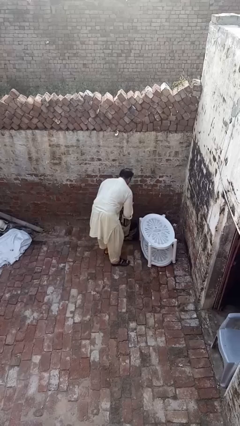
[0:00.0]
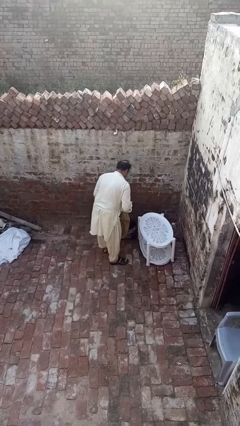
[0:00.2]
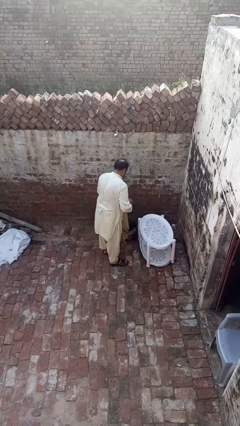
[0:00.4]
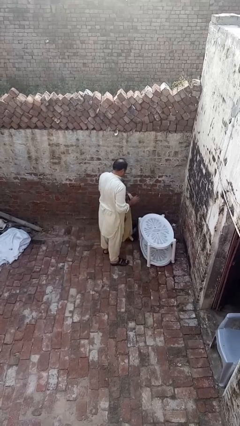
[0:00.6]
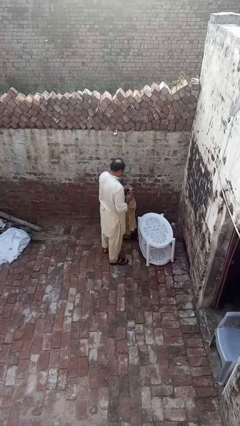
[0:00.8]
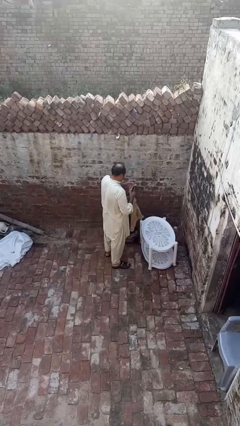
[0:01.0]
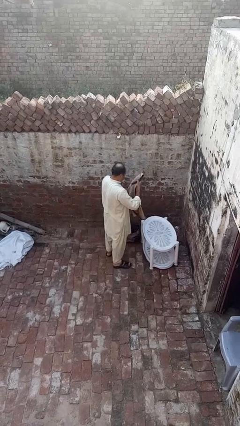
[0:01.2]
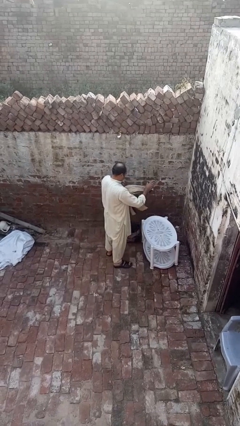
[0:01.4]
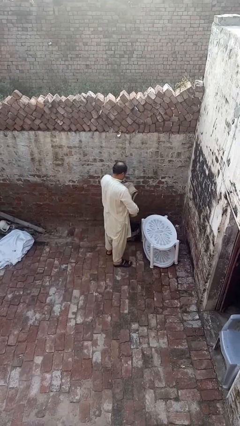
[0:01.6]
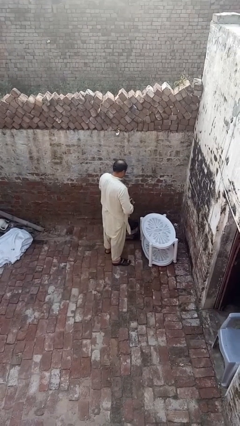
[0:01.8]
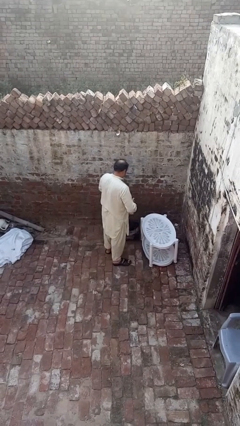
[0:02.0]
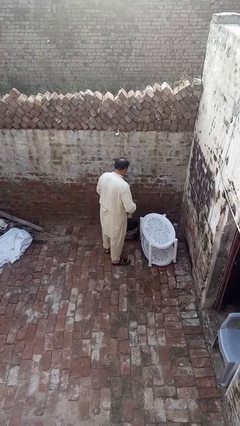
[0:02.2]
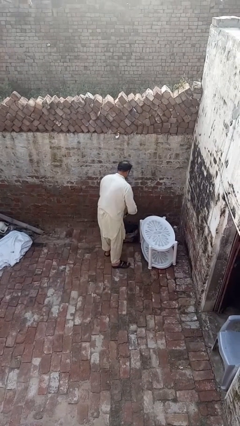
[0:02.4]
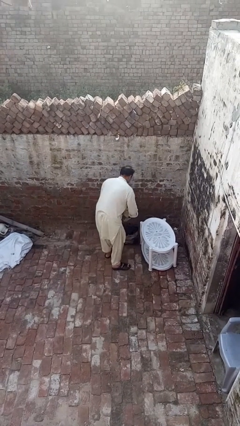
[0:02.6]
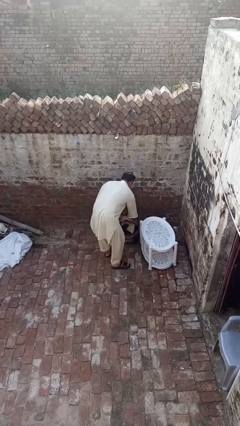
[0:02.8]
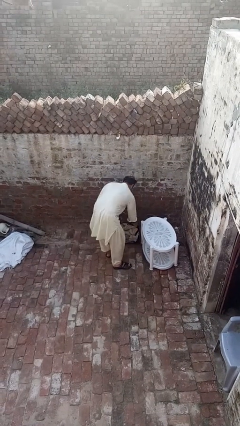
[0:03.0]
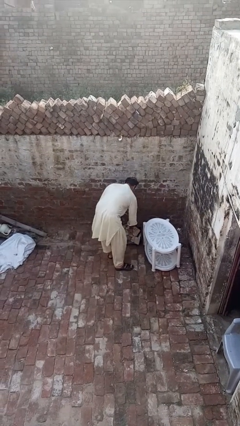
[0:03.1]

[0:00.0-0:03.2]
person folds shirt

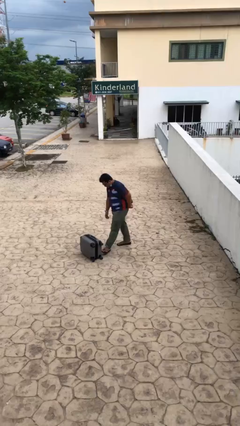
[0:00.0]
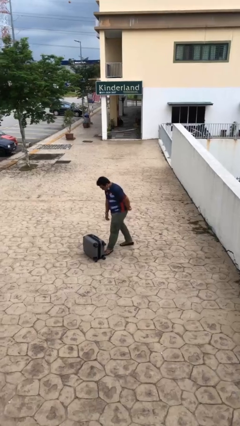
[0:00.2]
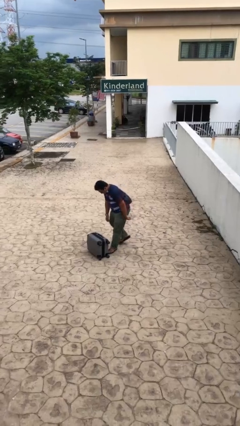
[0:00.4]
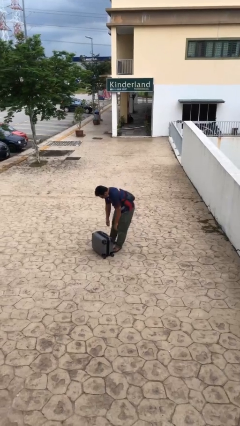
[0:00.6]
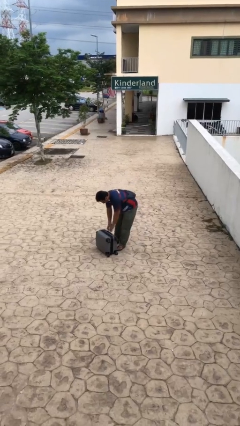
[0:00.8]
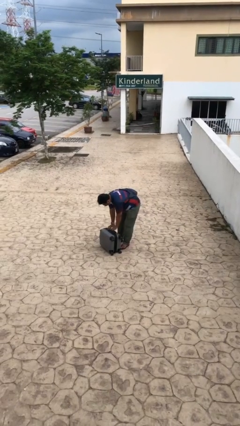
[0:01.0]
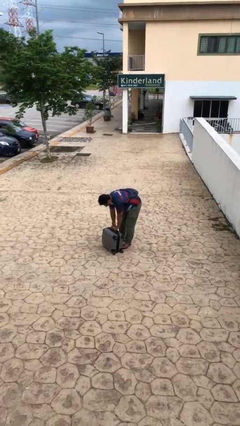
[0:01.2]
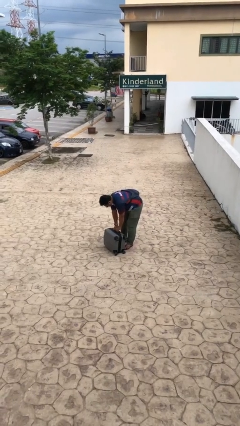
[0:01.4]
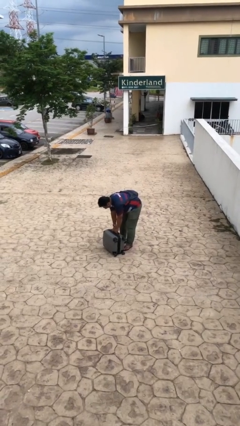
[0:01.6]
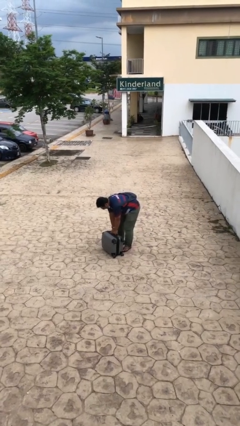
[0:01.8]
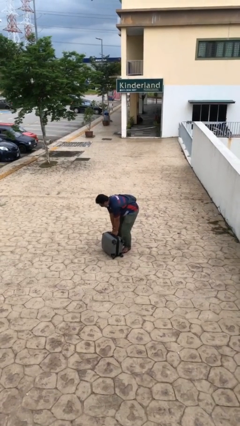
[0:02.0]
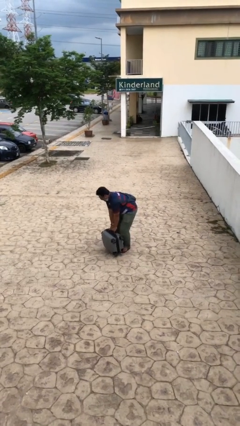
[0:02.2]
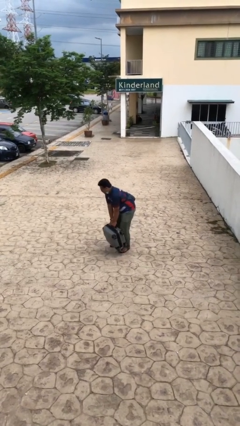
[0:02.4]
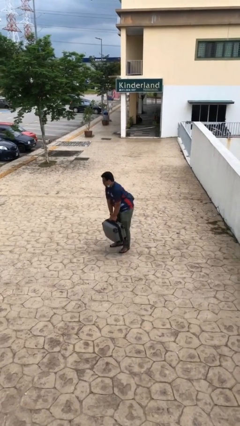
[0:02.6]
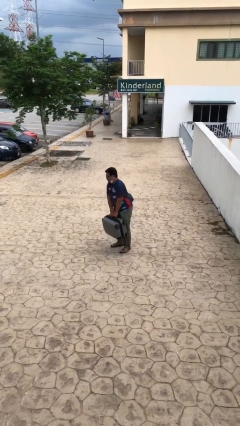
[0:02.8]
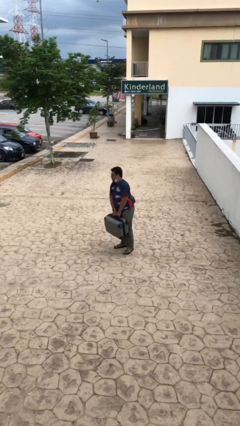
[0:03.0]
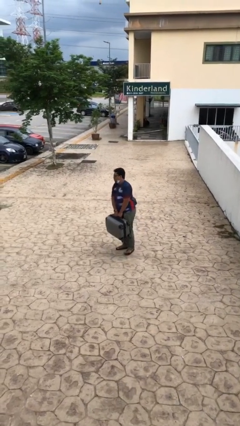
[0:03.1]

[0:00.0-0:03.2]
person picks up object from floor

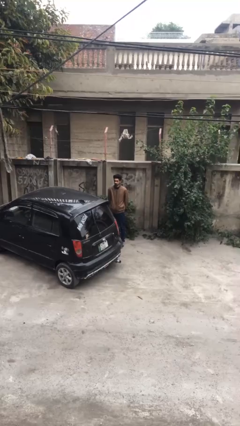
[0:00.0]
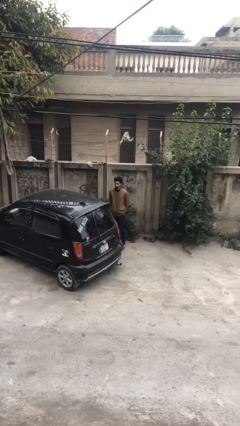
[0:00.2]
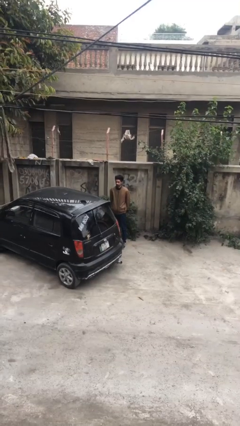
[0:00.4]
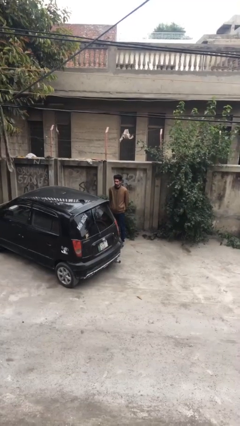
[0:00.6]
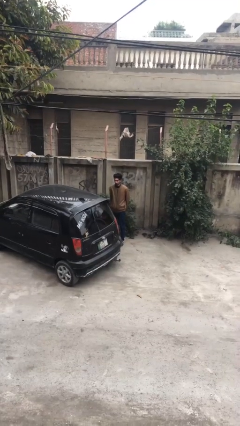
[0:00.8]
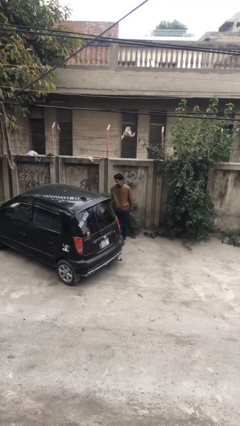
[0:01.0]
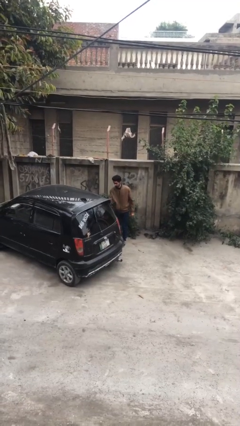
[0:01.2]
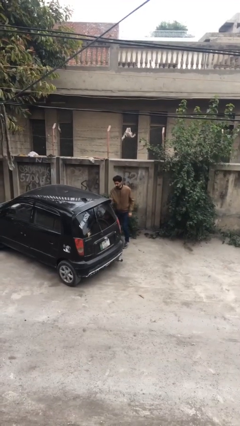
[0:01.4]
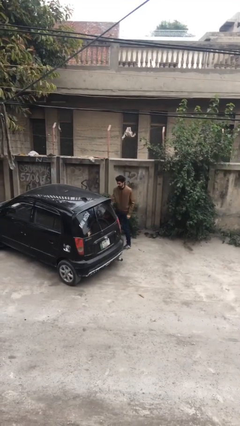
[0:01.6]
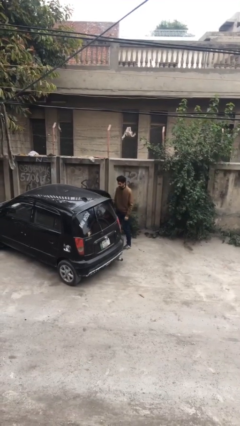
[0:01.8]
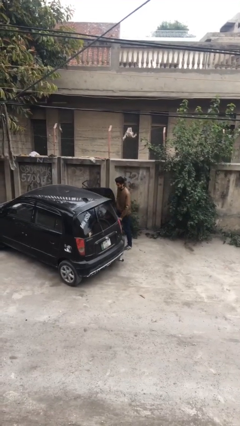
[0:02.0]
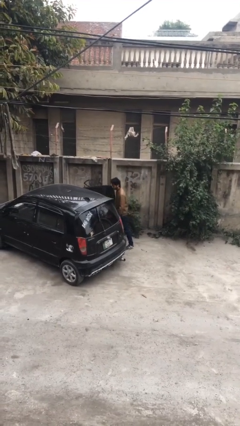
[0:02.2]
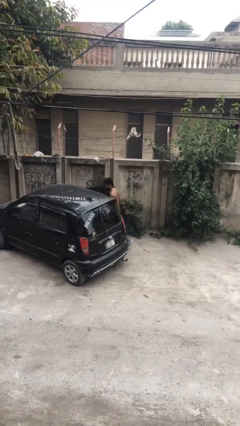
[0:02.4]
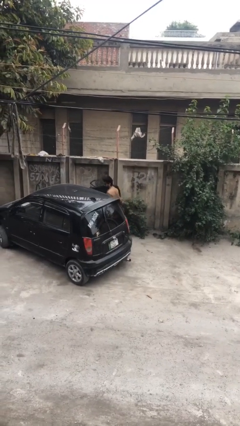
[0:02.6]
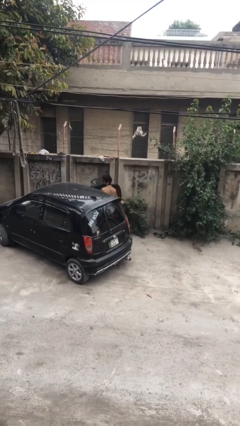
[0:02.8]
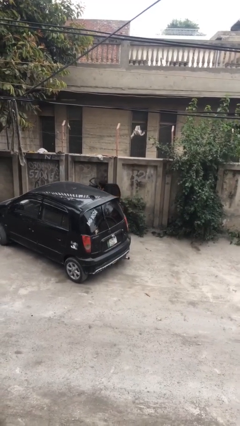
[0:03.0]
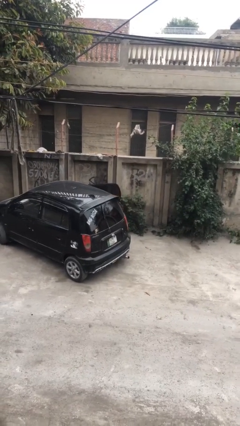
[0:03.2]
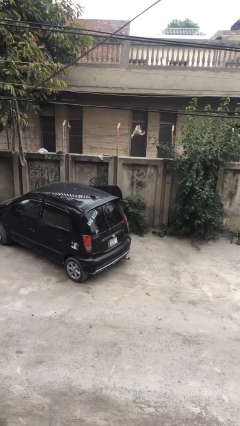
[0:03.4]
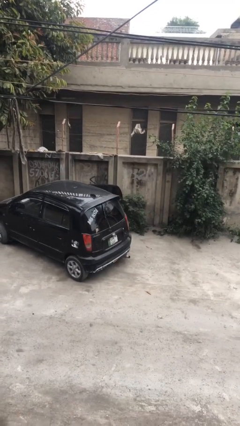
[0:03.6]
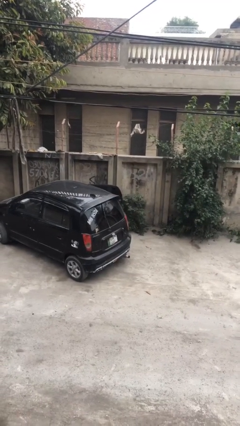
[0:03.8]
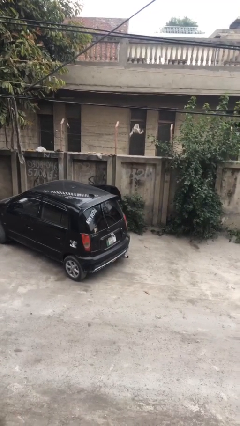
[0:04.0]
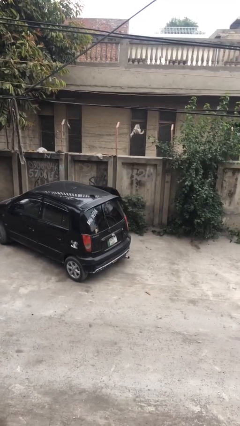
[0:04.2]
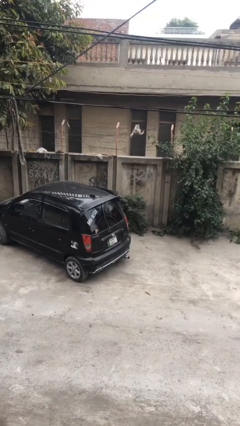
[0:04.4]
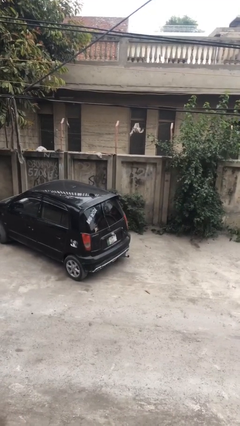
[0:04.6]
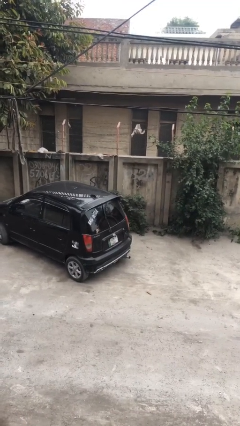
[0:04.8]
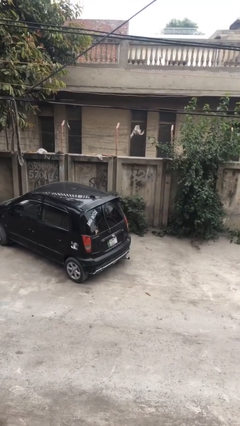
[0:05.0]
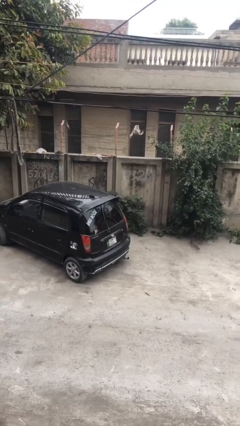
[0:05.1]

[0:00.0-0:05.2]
person enters car

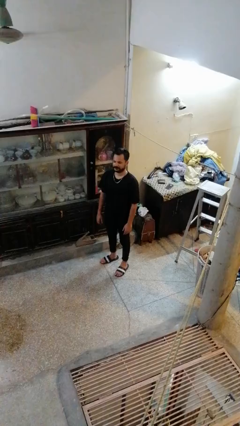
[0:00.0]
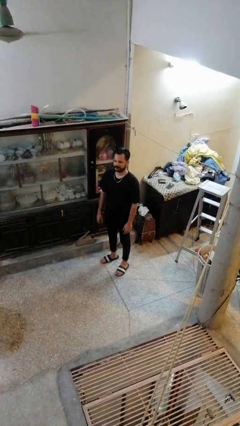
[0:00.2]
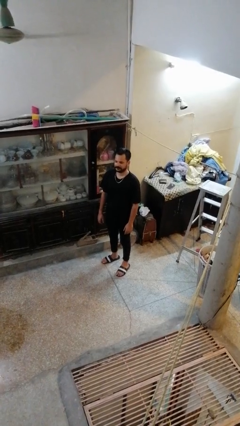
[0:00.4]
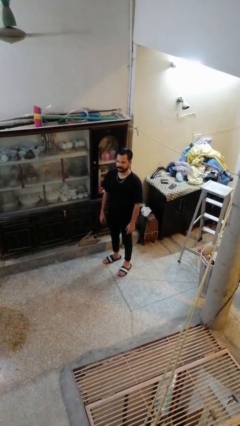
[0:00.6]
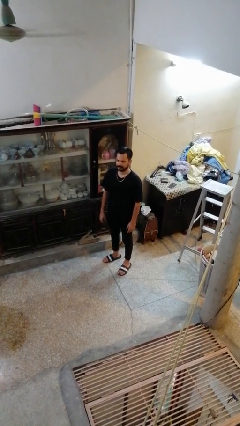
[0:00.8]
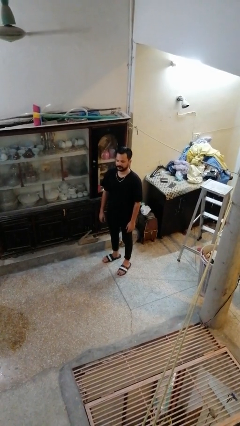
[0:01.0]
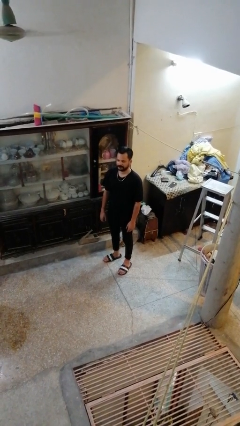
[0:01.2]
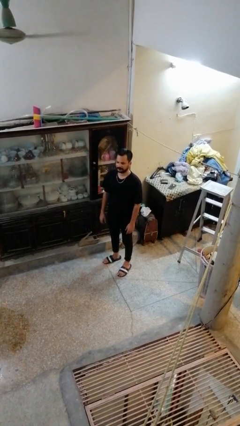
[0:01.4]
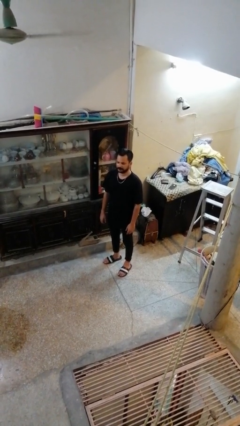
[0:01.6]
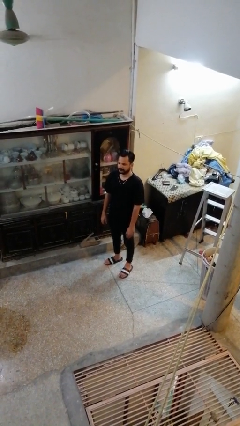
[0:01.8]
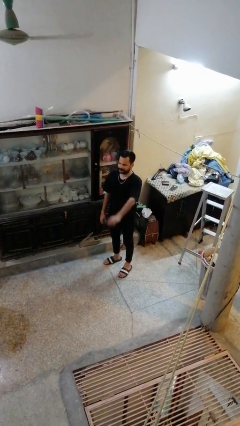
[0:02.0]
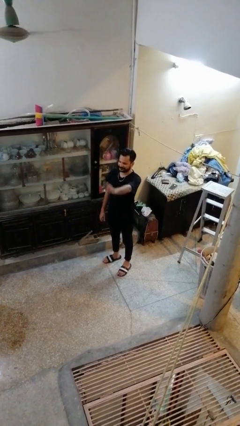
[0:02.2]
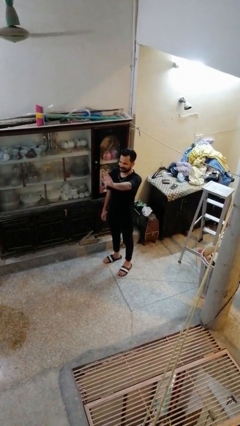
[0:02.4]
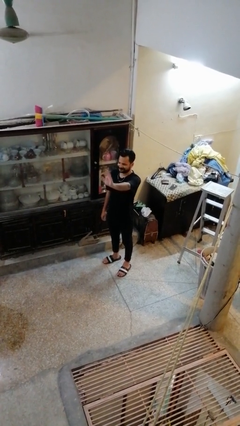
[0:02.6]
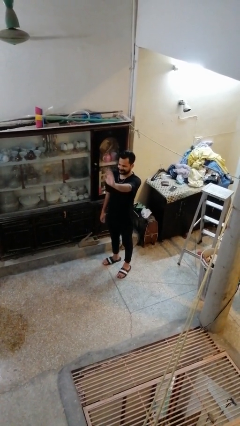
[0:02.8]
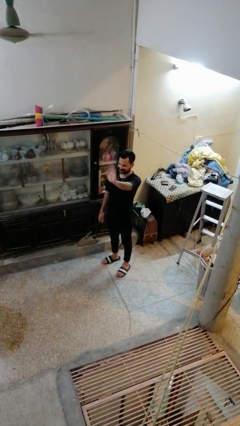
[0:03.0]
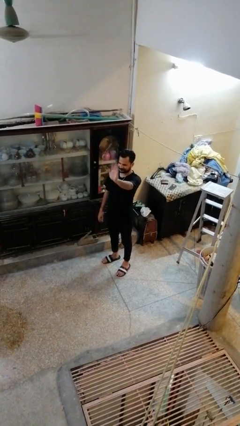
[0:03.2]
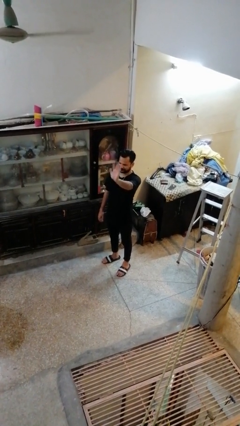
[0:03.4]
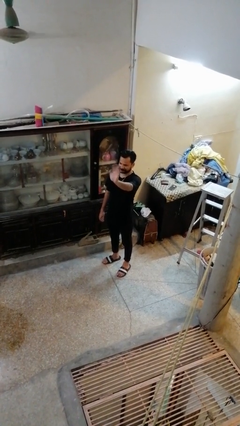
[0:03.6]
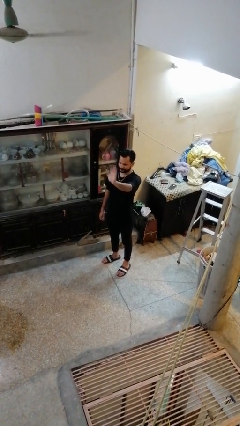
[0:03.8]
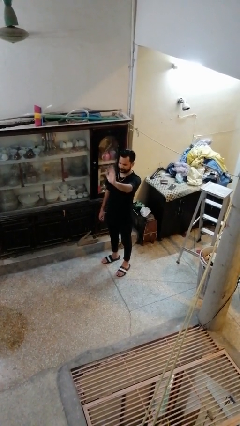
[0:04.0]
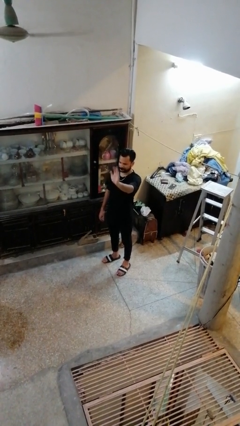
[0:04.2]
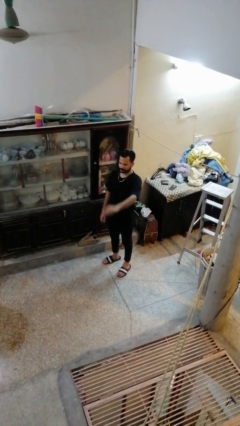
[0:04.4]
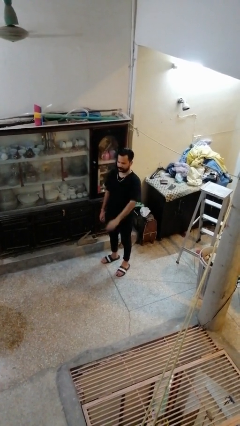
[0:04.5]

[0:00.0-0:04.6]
person waves at person

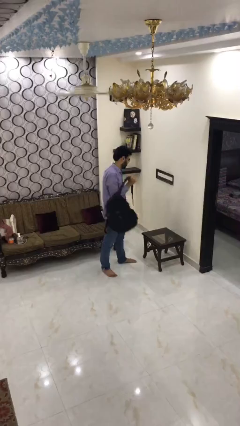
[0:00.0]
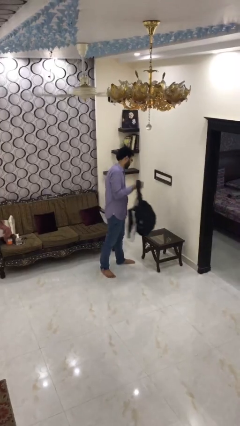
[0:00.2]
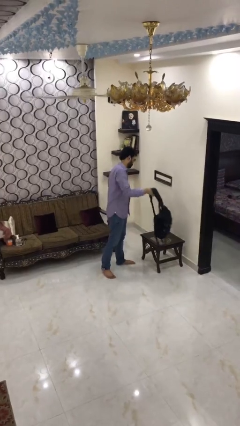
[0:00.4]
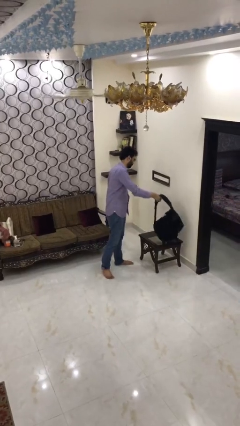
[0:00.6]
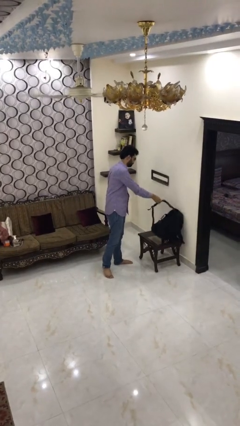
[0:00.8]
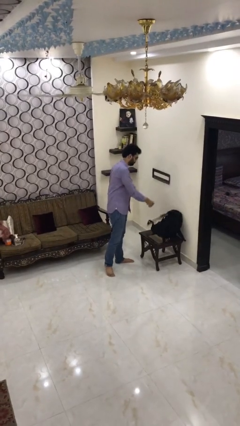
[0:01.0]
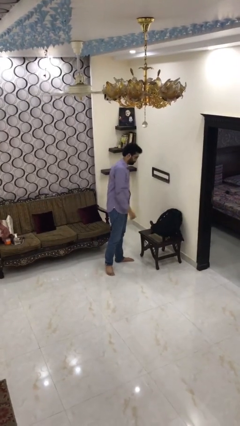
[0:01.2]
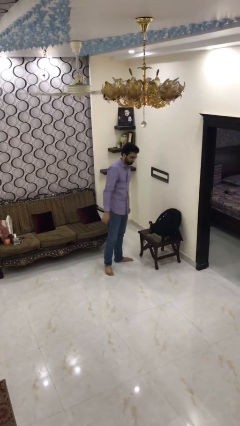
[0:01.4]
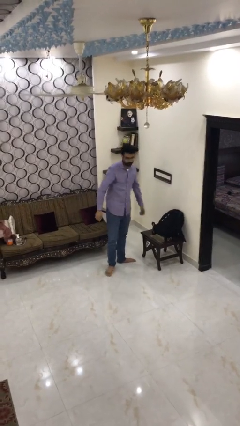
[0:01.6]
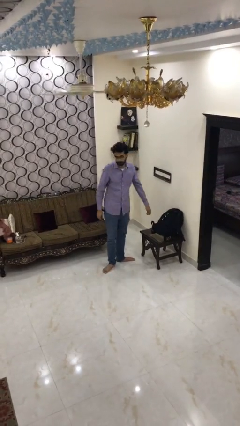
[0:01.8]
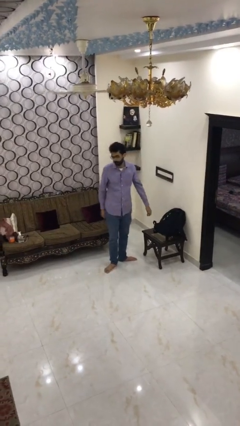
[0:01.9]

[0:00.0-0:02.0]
person puts down object on table
